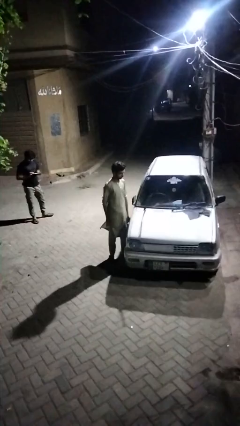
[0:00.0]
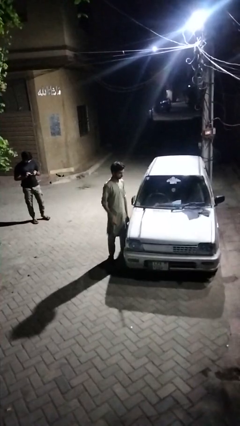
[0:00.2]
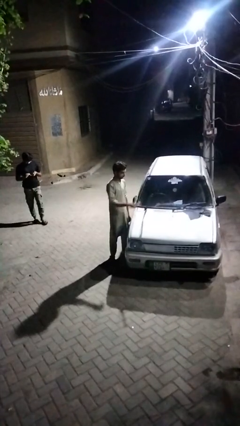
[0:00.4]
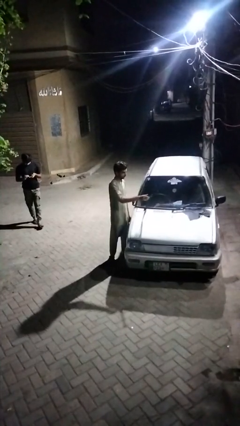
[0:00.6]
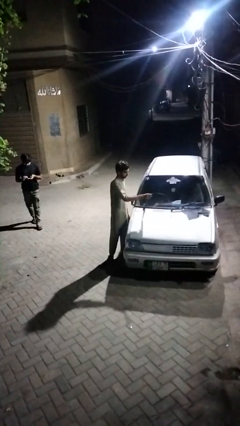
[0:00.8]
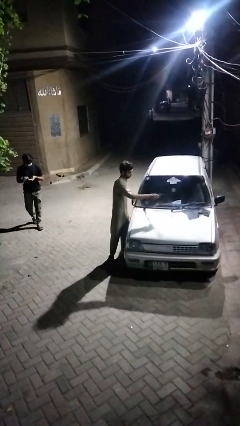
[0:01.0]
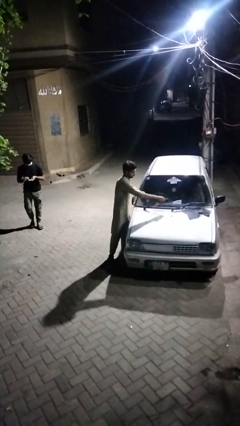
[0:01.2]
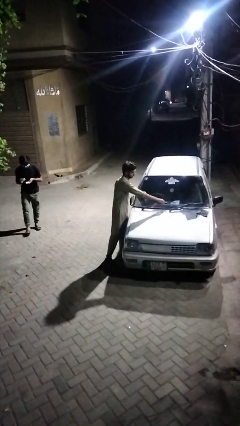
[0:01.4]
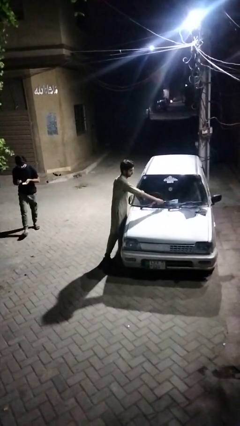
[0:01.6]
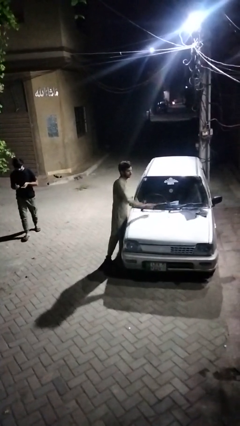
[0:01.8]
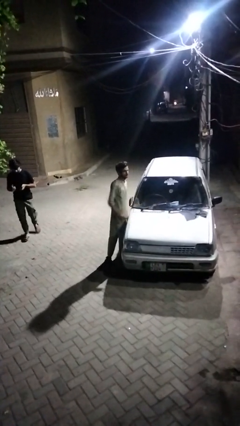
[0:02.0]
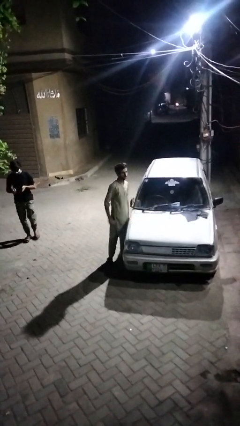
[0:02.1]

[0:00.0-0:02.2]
person flips down car wipers

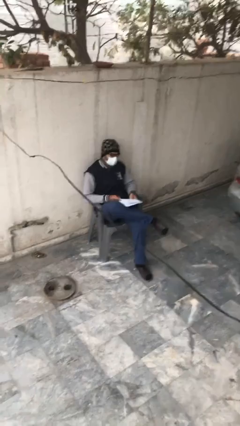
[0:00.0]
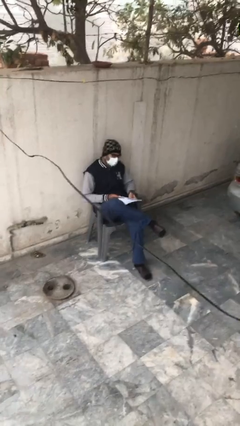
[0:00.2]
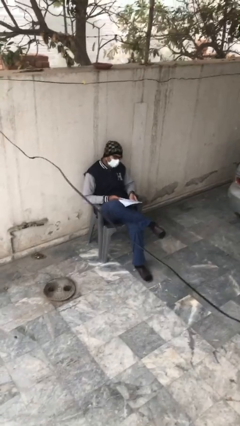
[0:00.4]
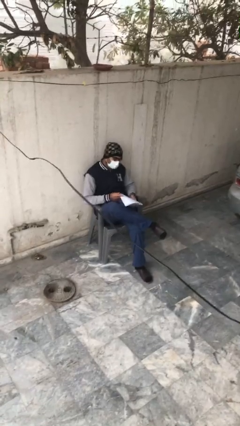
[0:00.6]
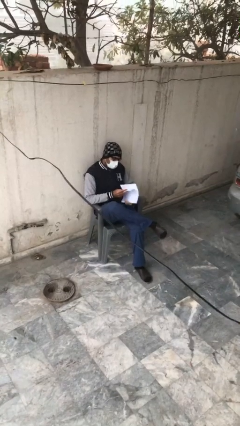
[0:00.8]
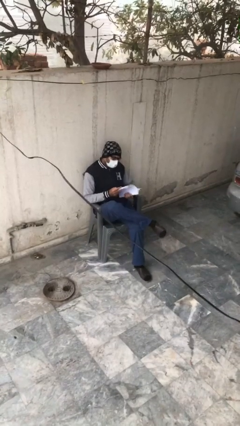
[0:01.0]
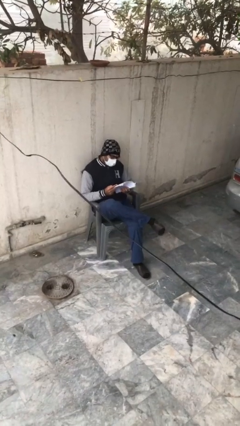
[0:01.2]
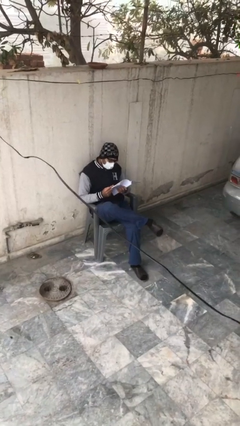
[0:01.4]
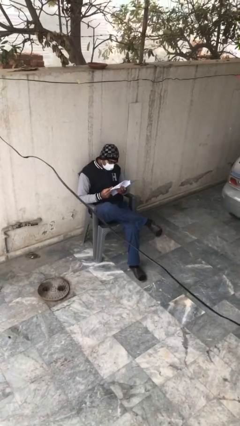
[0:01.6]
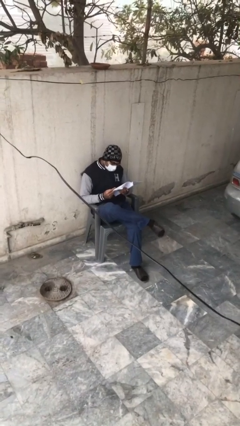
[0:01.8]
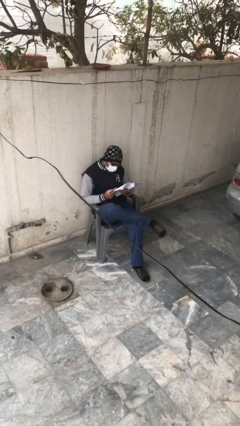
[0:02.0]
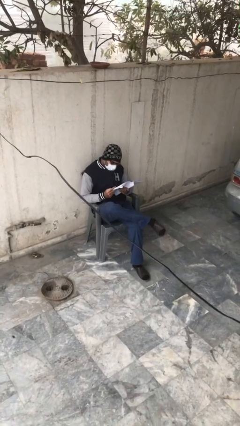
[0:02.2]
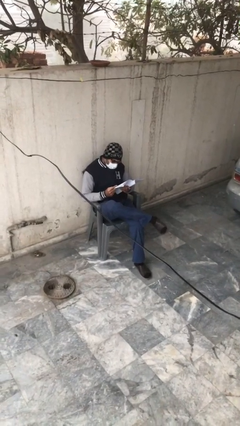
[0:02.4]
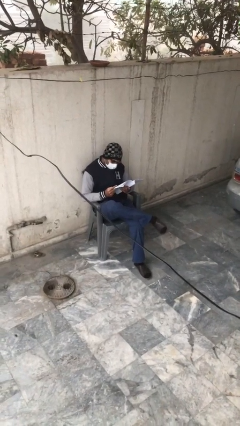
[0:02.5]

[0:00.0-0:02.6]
person reads document

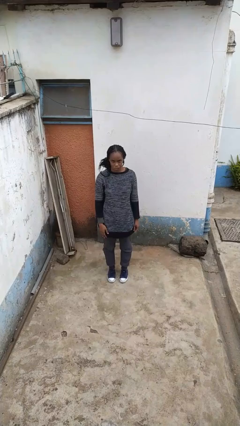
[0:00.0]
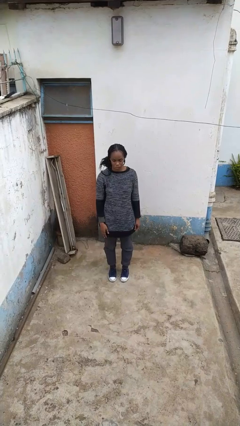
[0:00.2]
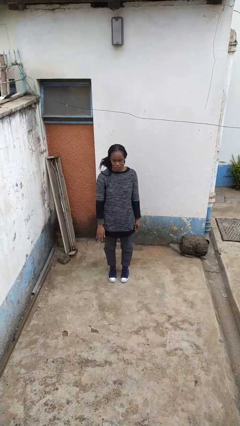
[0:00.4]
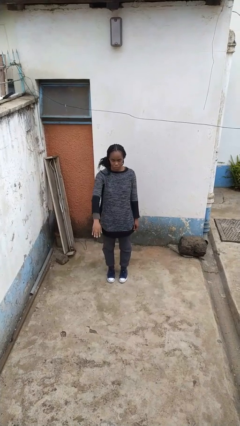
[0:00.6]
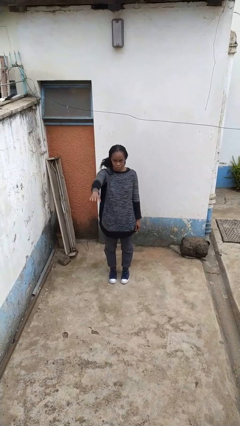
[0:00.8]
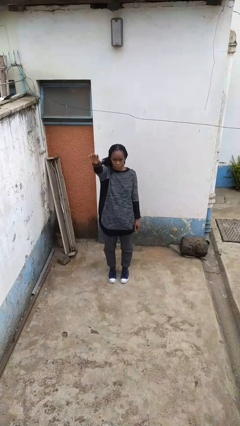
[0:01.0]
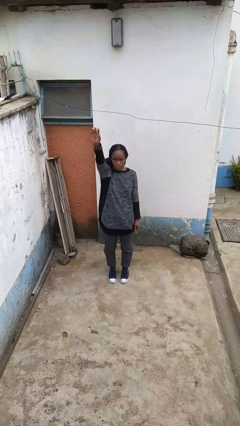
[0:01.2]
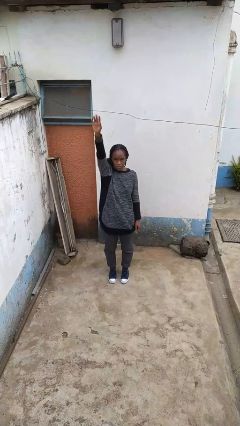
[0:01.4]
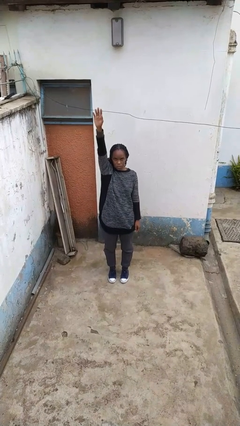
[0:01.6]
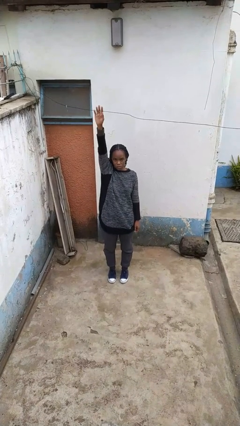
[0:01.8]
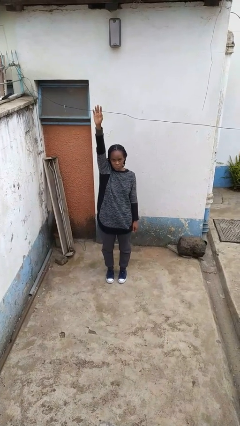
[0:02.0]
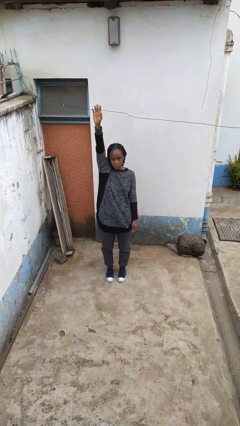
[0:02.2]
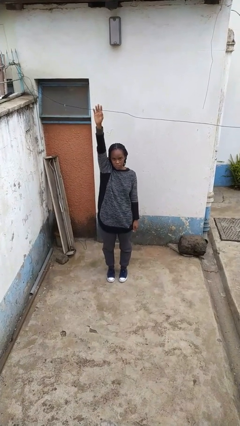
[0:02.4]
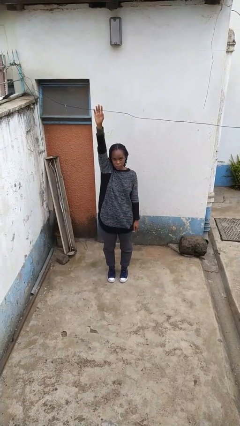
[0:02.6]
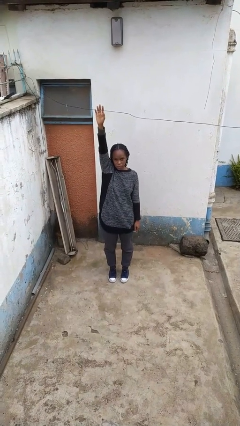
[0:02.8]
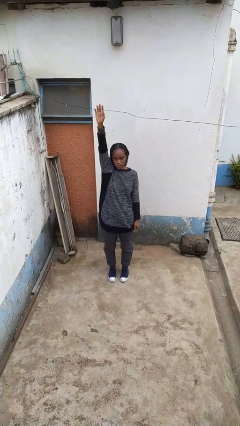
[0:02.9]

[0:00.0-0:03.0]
person gestures raise hand

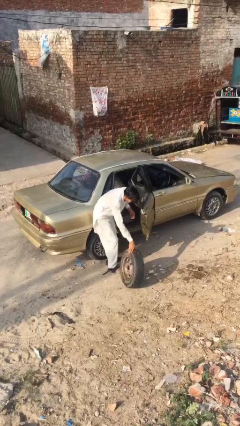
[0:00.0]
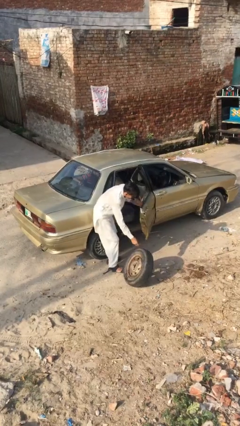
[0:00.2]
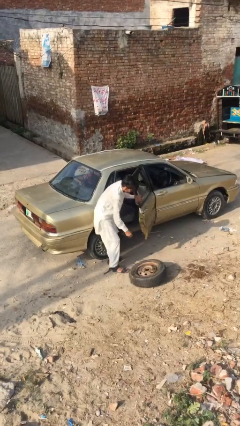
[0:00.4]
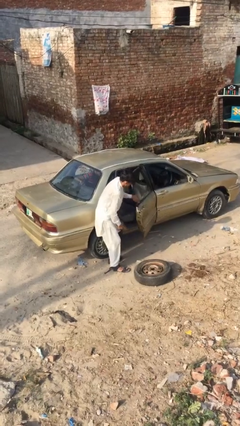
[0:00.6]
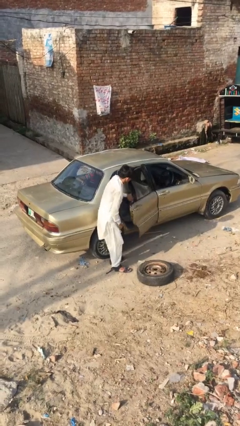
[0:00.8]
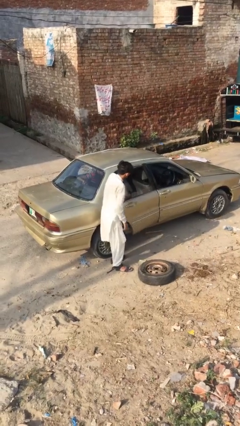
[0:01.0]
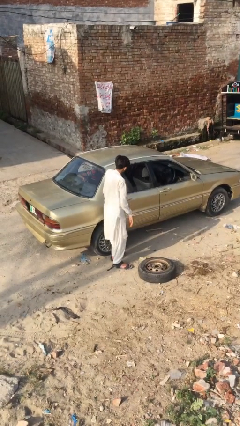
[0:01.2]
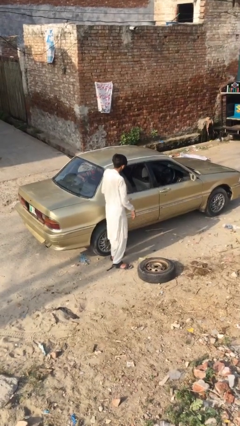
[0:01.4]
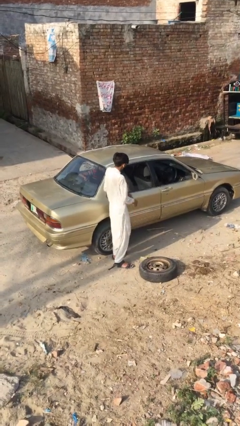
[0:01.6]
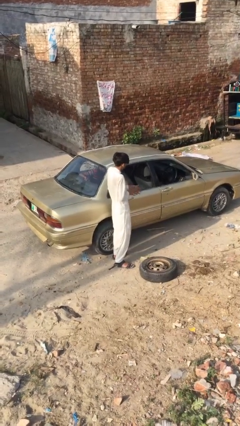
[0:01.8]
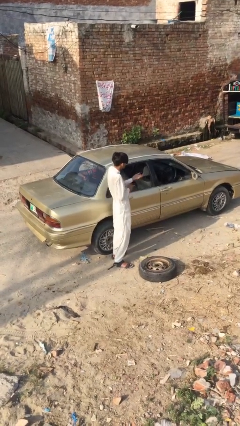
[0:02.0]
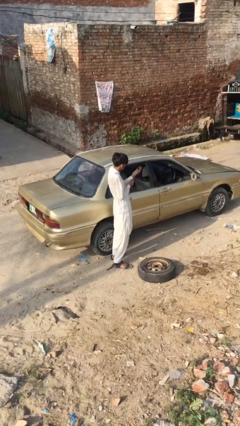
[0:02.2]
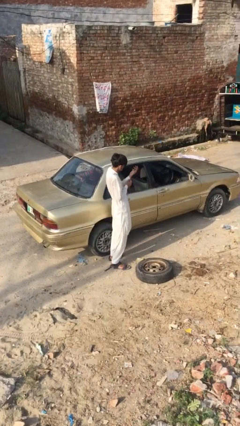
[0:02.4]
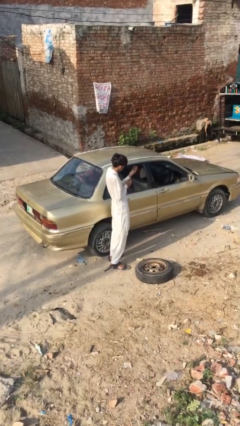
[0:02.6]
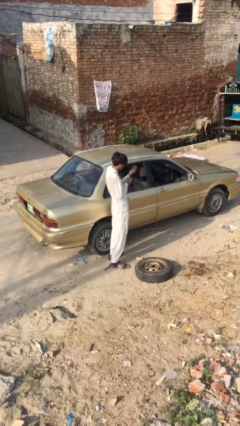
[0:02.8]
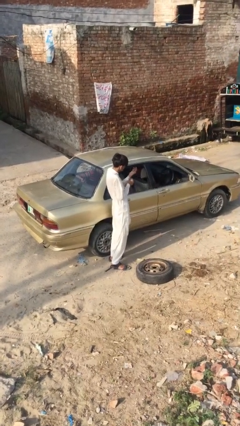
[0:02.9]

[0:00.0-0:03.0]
person closes car door

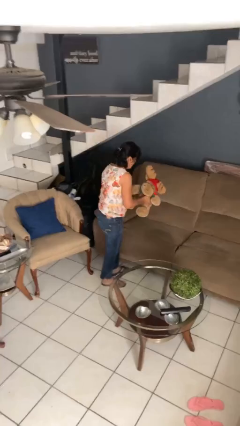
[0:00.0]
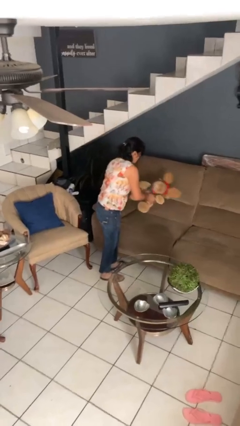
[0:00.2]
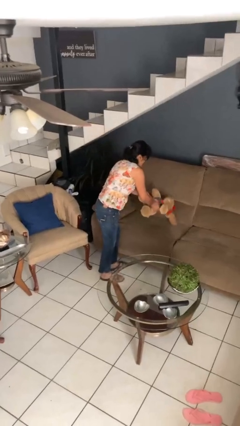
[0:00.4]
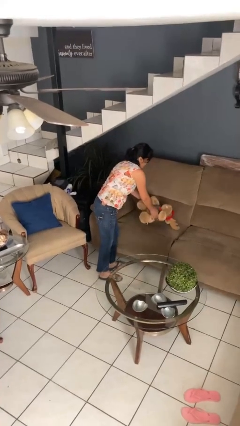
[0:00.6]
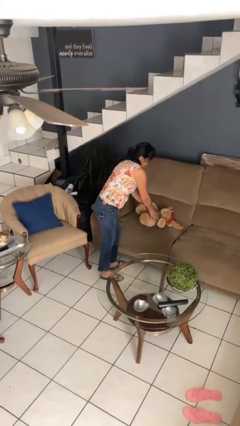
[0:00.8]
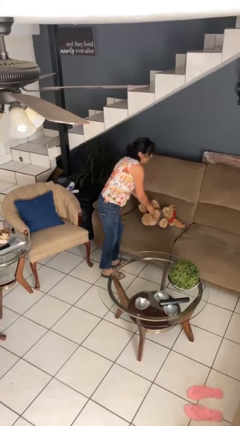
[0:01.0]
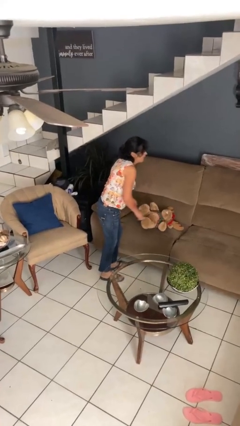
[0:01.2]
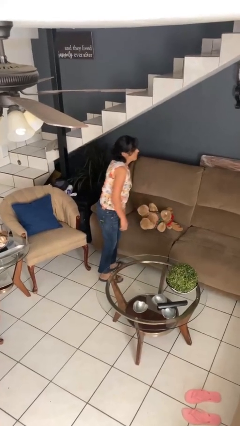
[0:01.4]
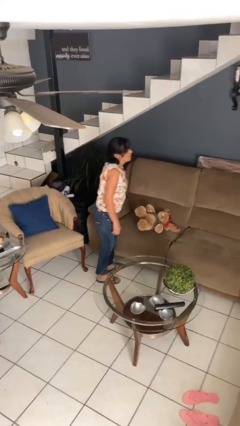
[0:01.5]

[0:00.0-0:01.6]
person puts down object on couch

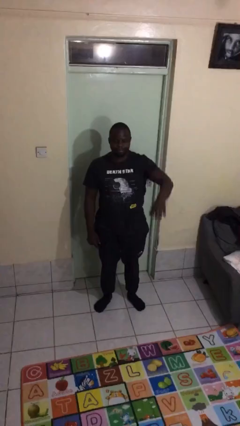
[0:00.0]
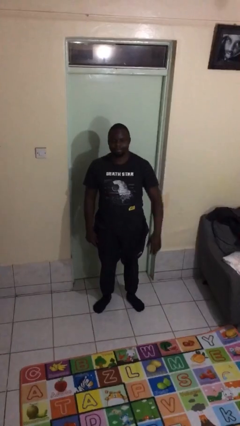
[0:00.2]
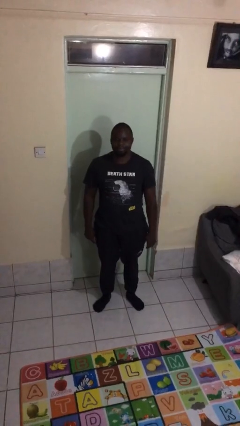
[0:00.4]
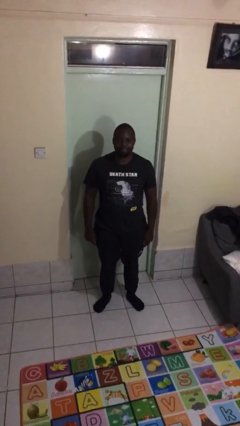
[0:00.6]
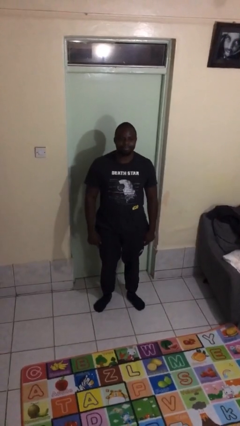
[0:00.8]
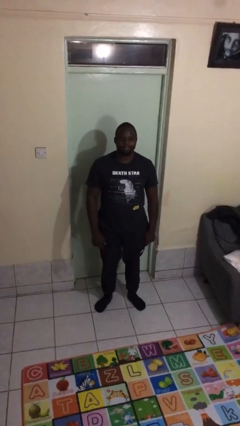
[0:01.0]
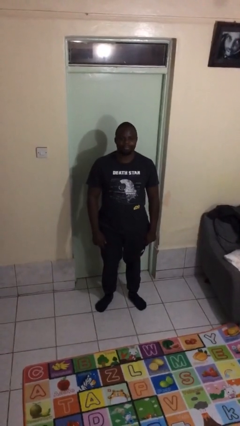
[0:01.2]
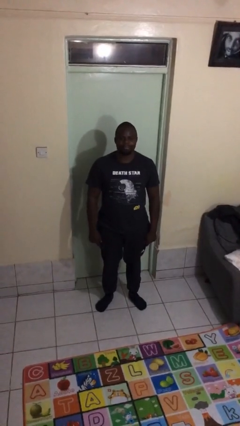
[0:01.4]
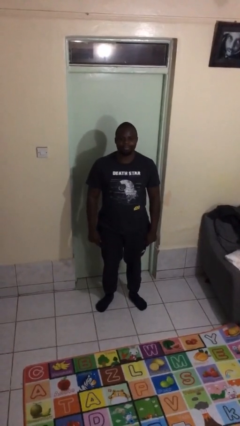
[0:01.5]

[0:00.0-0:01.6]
person gestures lower hand

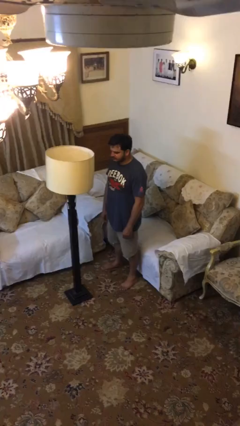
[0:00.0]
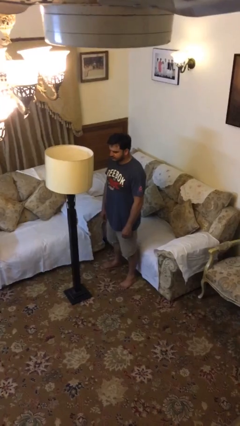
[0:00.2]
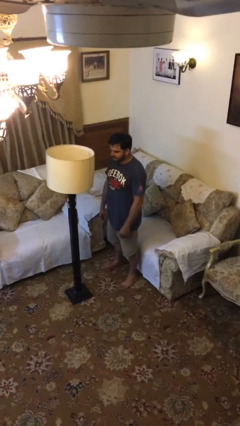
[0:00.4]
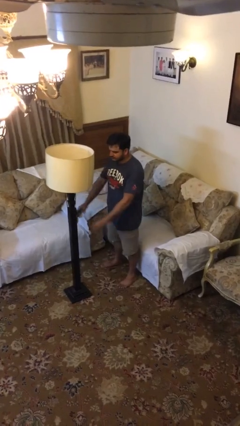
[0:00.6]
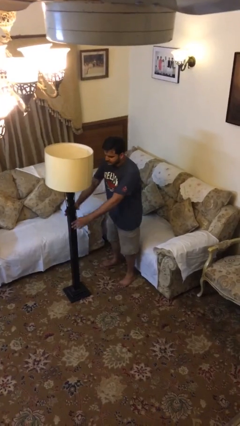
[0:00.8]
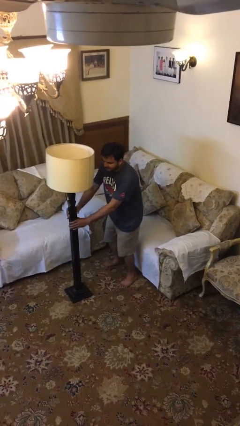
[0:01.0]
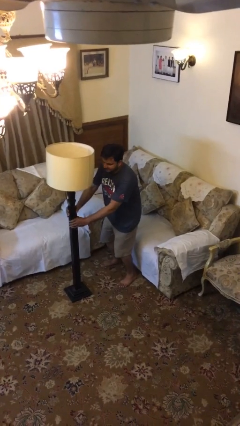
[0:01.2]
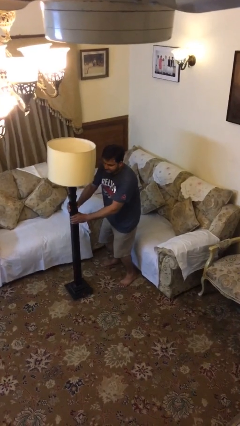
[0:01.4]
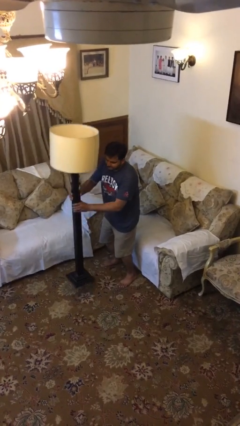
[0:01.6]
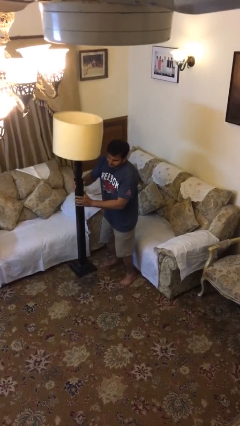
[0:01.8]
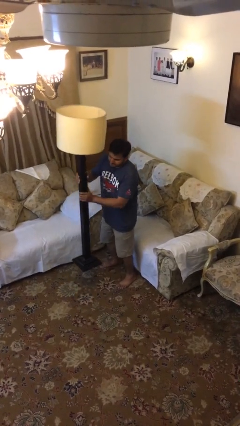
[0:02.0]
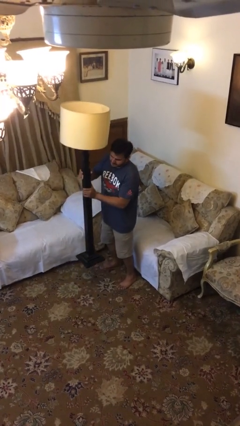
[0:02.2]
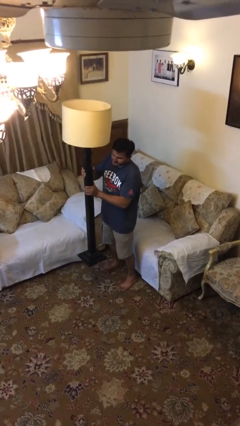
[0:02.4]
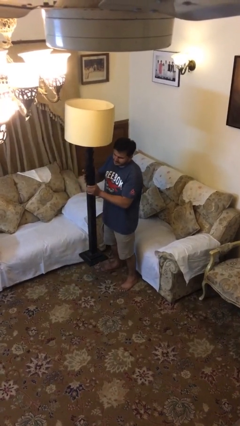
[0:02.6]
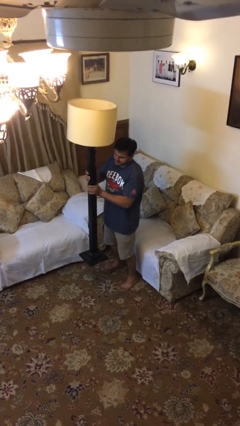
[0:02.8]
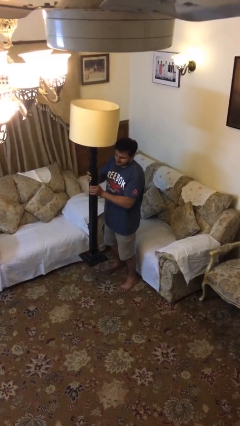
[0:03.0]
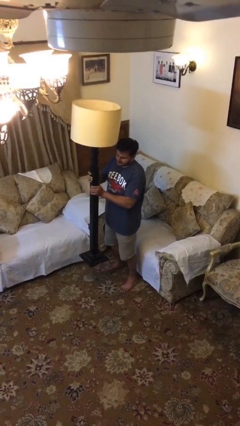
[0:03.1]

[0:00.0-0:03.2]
person picks up object from floor
